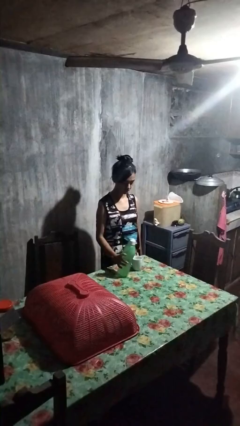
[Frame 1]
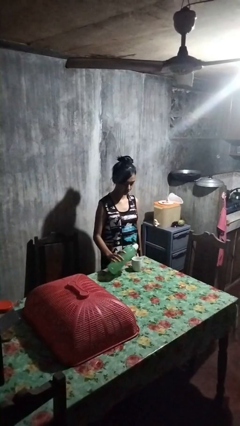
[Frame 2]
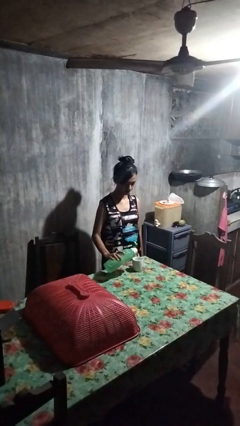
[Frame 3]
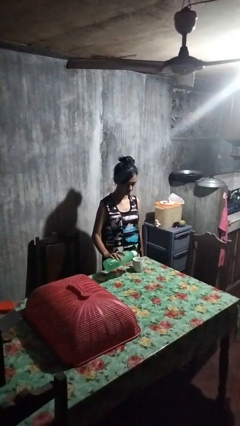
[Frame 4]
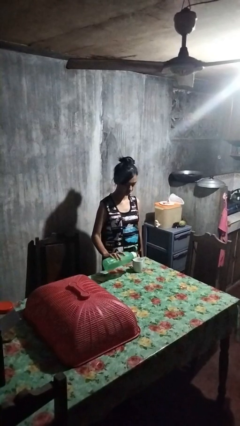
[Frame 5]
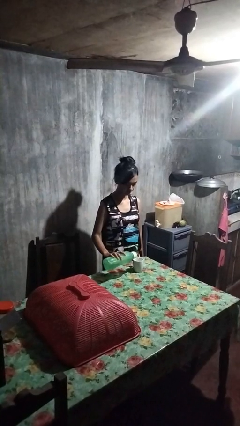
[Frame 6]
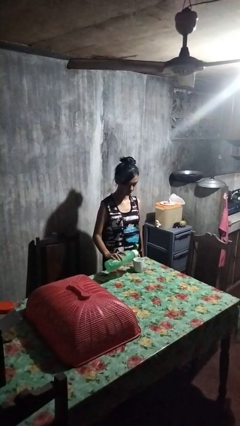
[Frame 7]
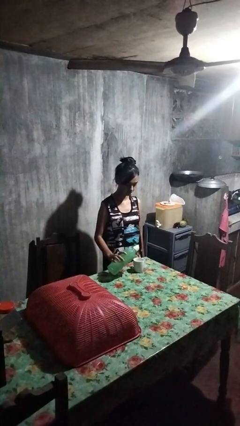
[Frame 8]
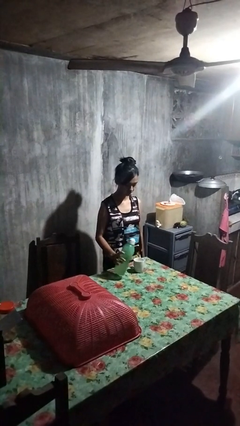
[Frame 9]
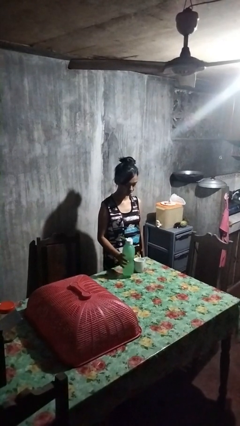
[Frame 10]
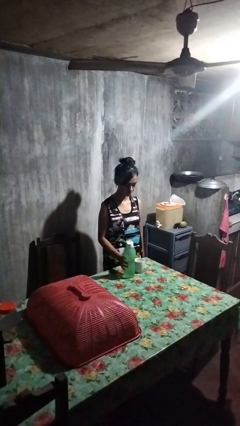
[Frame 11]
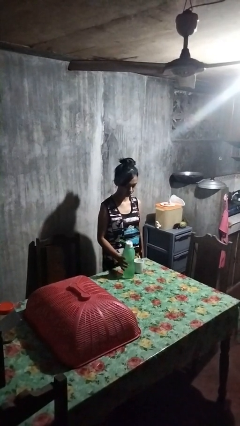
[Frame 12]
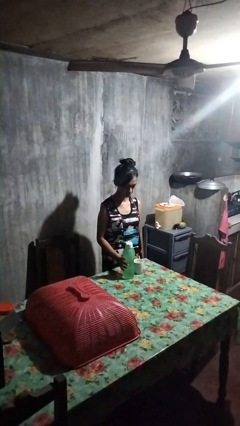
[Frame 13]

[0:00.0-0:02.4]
person pours liquid into cup

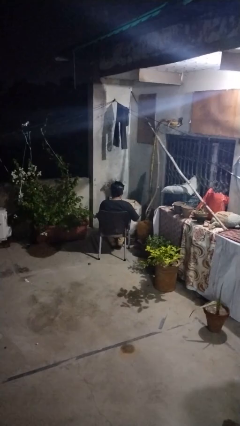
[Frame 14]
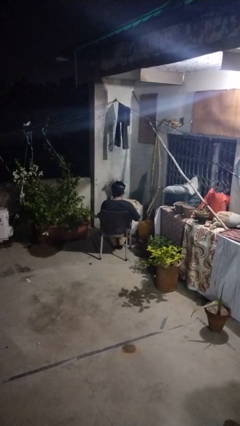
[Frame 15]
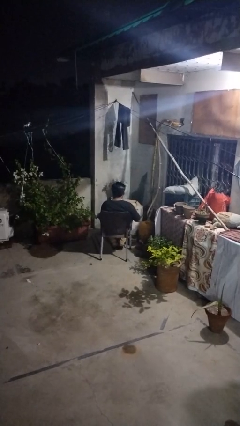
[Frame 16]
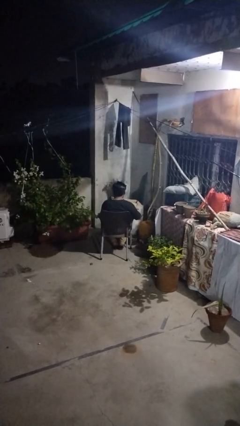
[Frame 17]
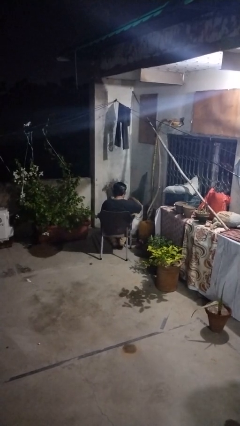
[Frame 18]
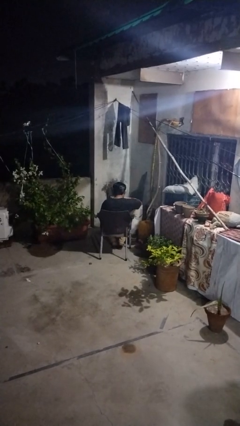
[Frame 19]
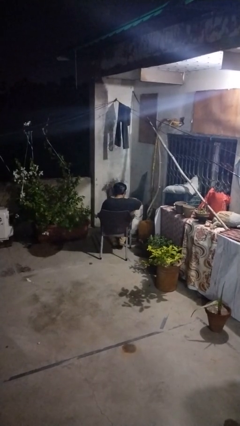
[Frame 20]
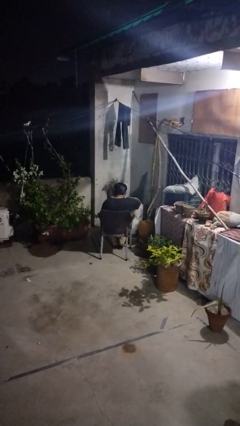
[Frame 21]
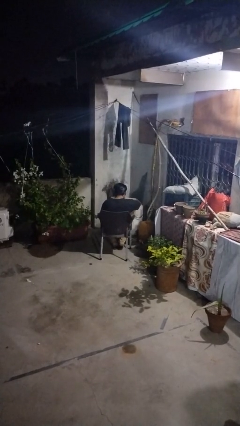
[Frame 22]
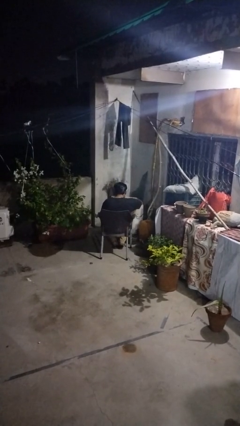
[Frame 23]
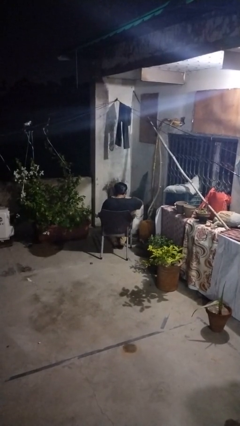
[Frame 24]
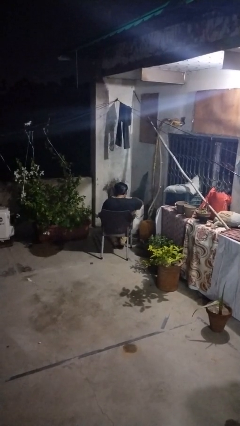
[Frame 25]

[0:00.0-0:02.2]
person searches in box

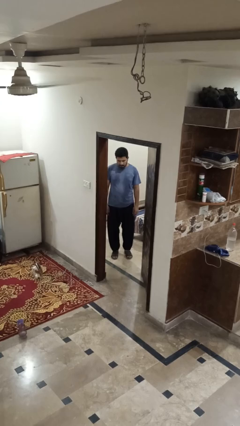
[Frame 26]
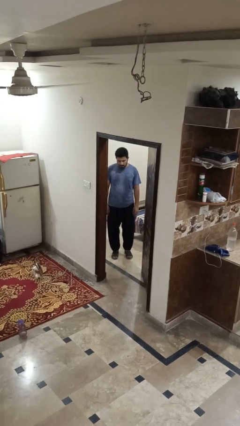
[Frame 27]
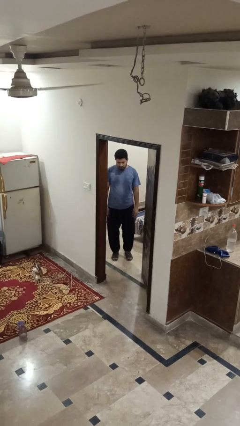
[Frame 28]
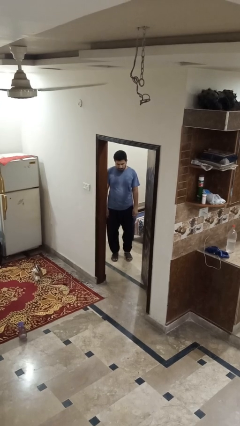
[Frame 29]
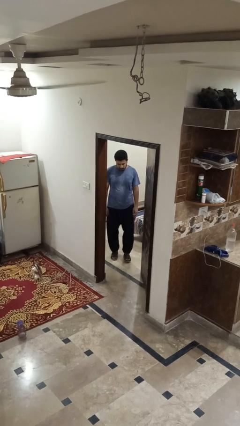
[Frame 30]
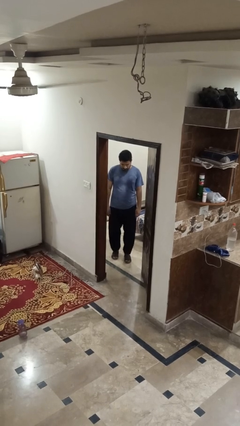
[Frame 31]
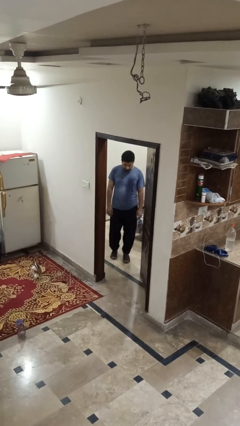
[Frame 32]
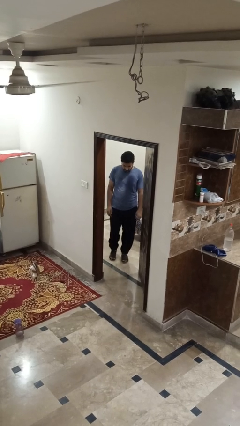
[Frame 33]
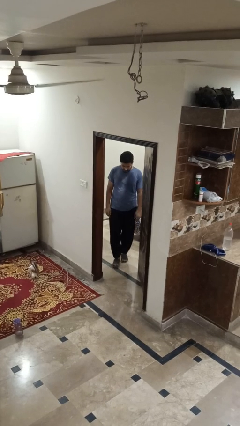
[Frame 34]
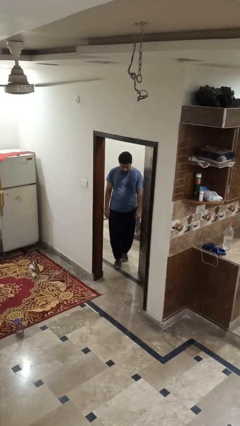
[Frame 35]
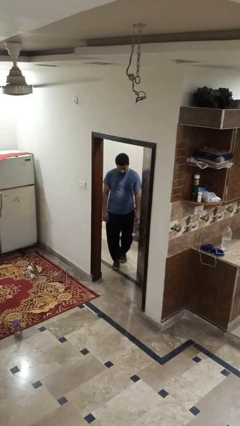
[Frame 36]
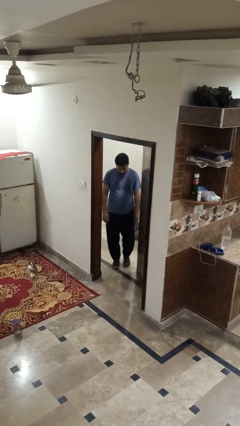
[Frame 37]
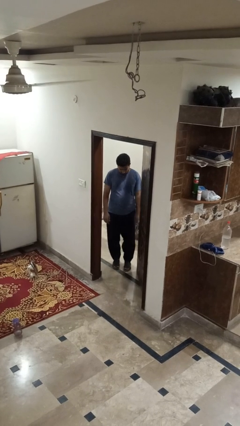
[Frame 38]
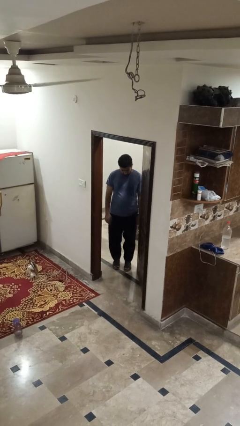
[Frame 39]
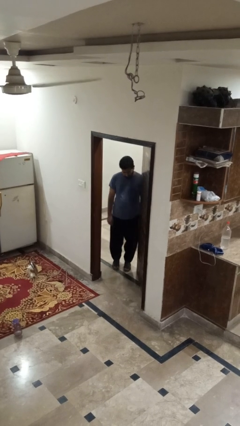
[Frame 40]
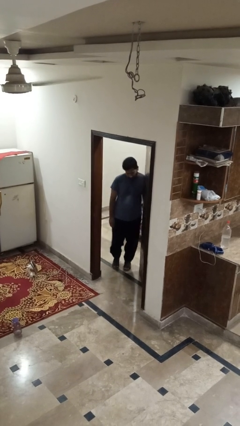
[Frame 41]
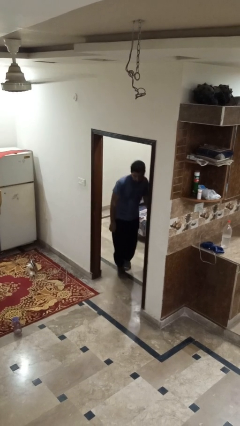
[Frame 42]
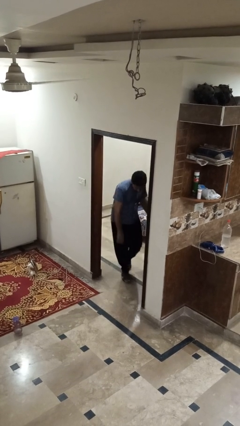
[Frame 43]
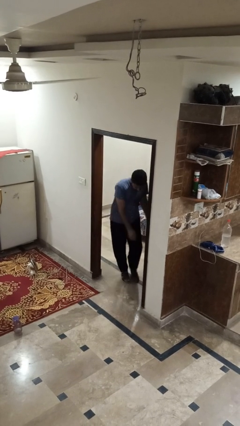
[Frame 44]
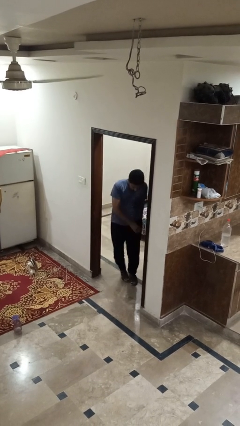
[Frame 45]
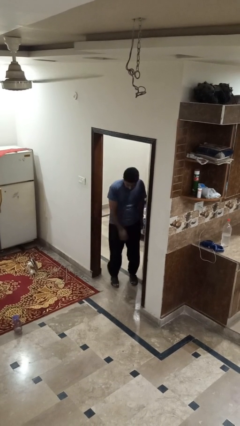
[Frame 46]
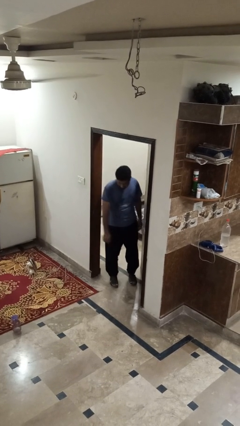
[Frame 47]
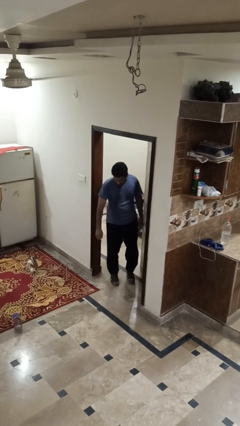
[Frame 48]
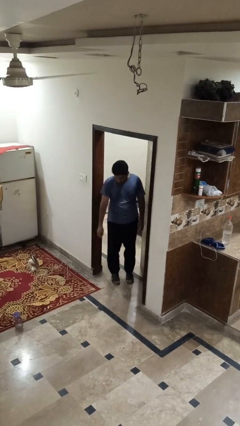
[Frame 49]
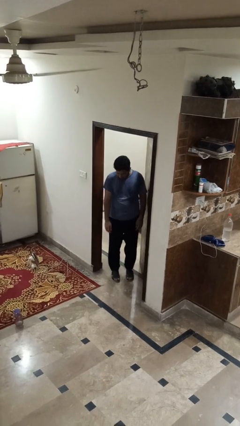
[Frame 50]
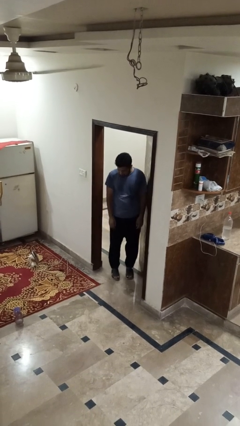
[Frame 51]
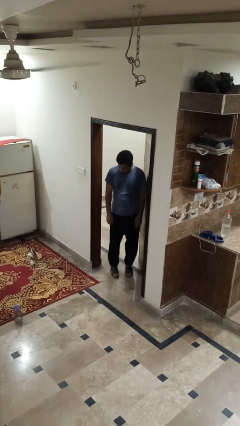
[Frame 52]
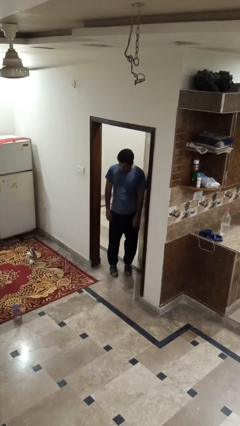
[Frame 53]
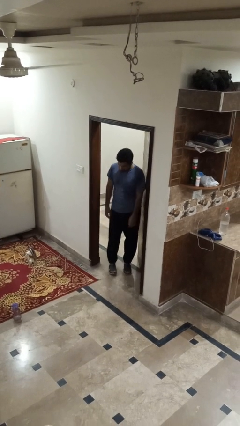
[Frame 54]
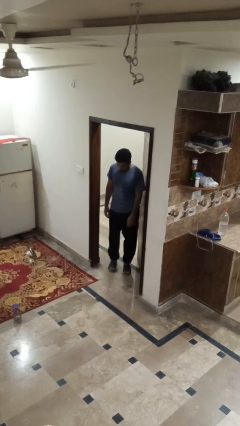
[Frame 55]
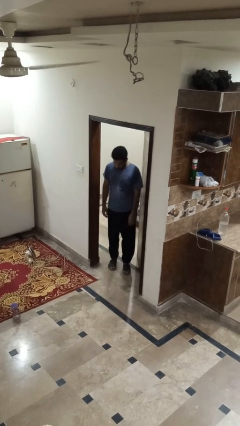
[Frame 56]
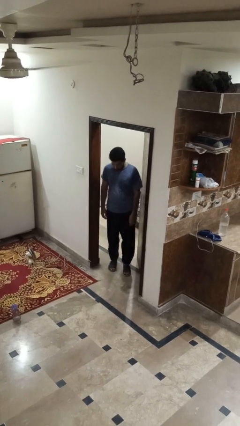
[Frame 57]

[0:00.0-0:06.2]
person bumps into wall

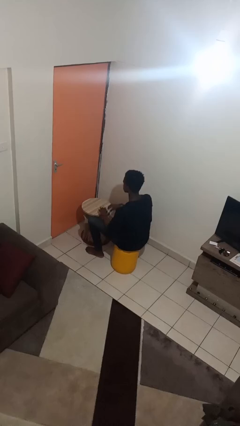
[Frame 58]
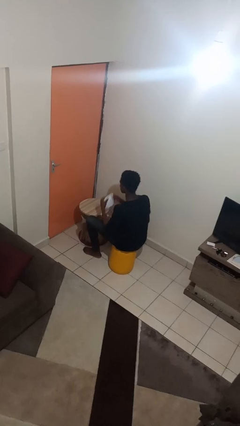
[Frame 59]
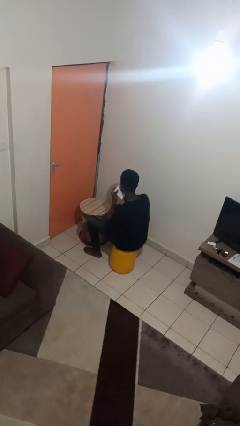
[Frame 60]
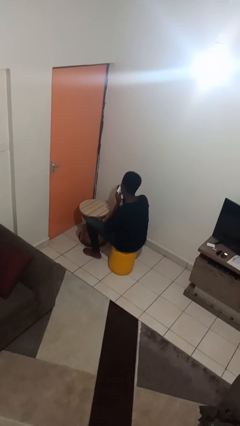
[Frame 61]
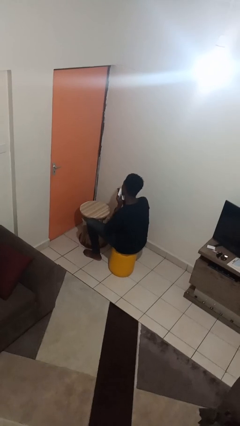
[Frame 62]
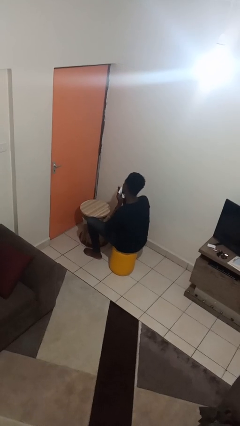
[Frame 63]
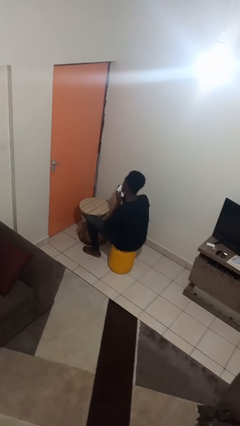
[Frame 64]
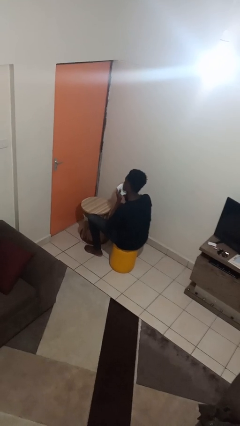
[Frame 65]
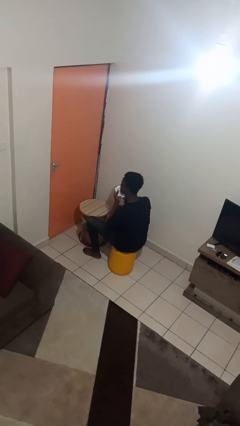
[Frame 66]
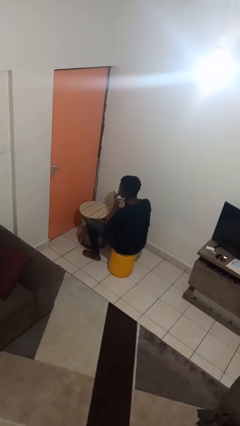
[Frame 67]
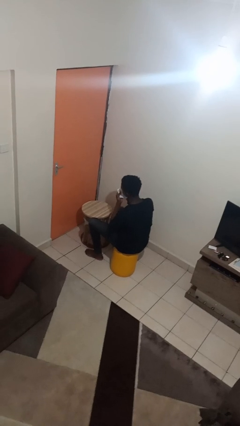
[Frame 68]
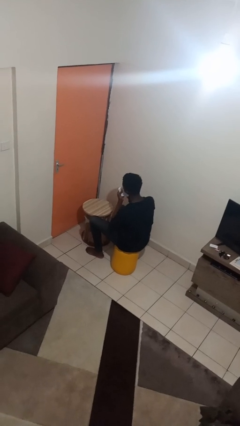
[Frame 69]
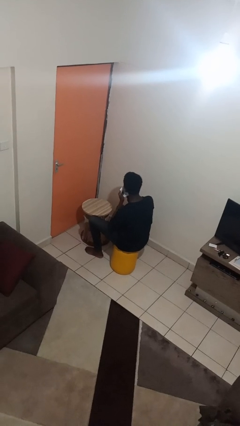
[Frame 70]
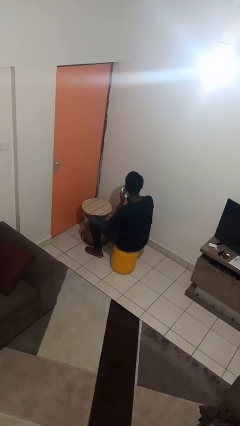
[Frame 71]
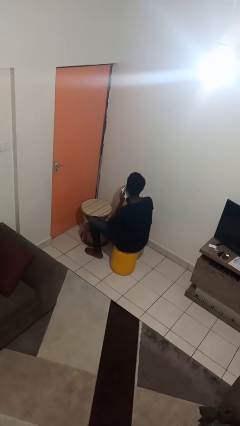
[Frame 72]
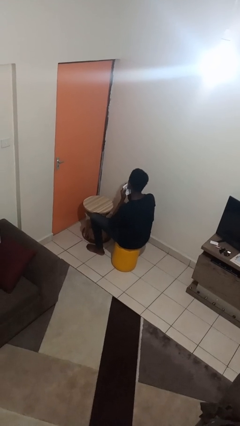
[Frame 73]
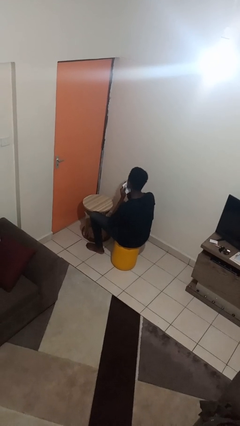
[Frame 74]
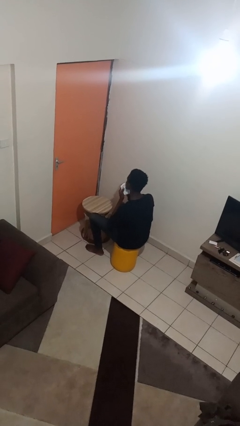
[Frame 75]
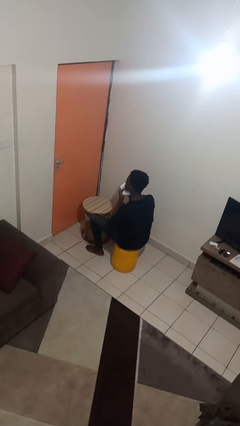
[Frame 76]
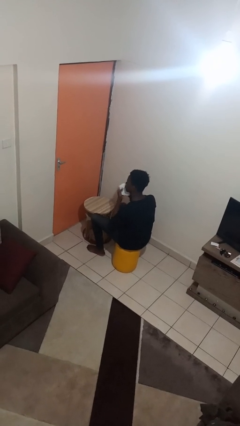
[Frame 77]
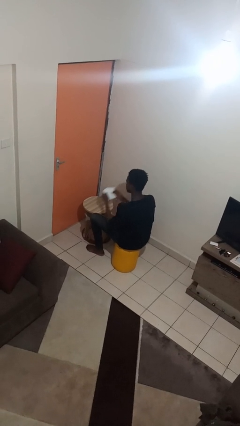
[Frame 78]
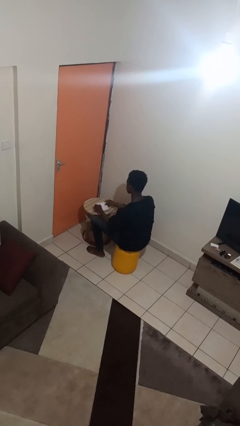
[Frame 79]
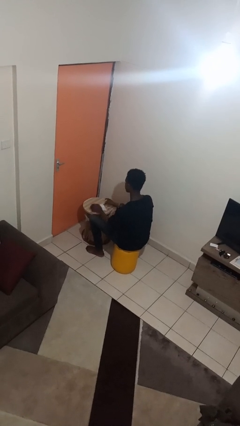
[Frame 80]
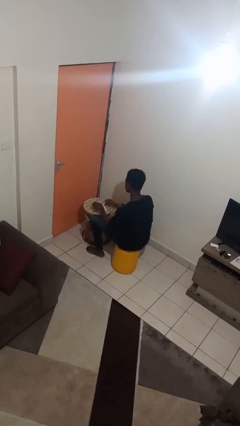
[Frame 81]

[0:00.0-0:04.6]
person wipes mouth with napkin

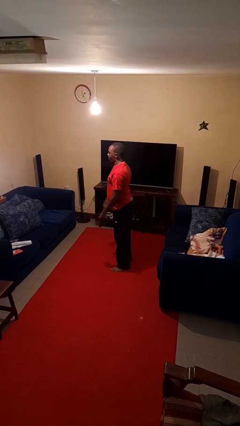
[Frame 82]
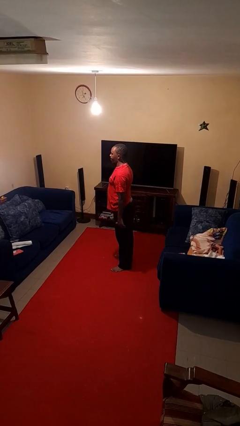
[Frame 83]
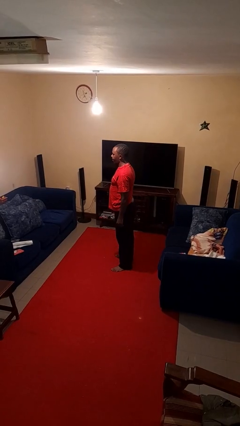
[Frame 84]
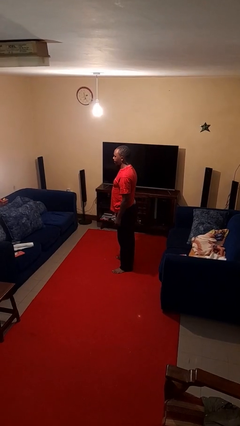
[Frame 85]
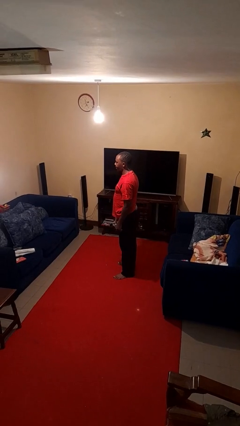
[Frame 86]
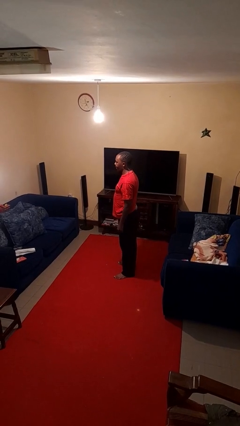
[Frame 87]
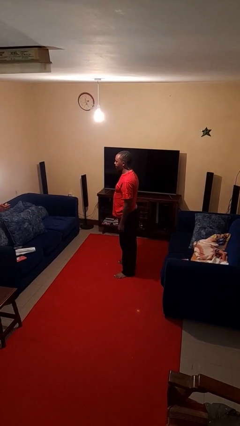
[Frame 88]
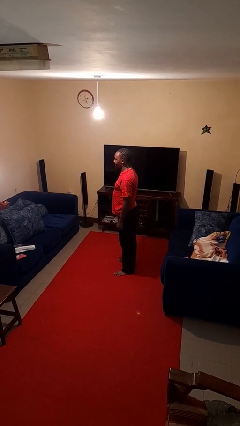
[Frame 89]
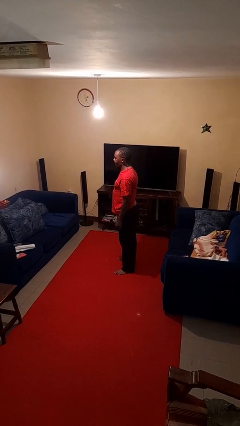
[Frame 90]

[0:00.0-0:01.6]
person stands up

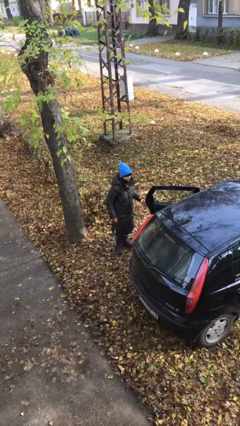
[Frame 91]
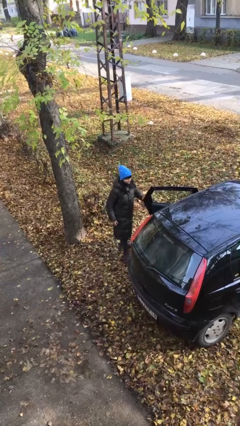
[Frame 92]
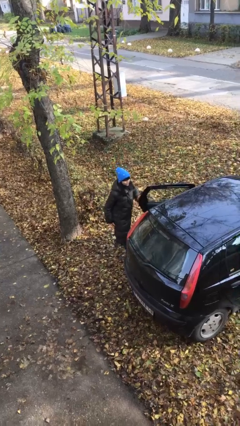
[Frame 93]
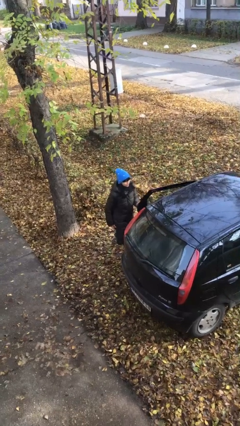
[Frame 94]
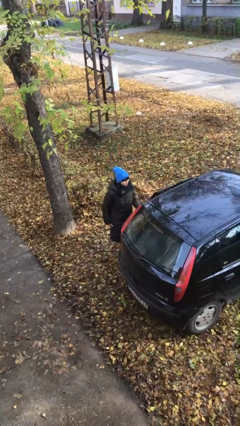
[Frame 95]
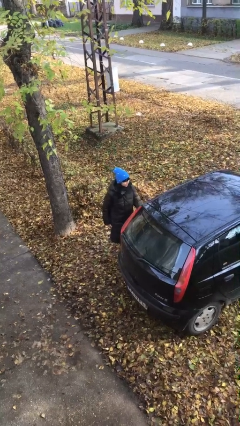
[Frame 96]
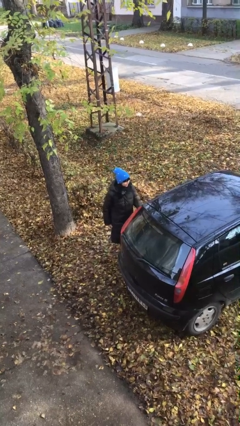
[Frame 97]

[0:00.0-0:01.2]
person closes car door
